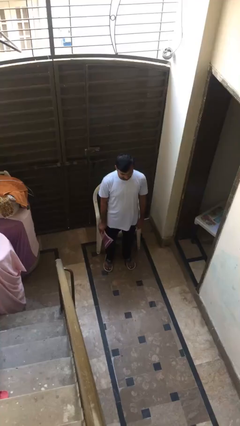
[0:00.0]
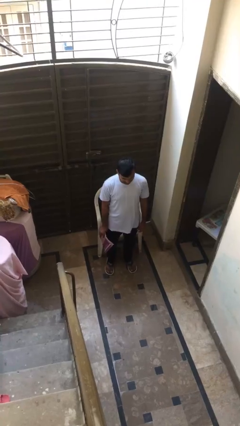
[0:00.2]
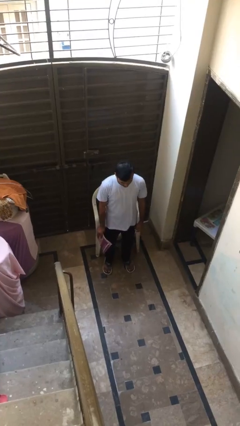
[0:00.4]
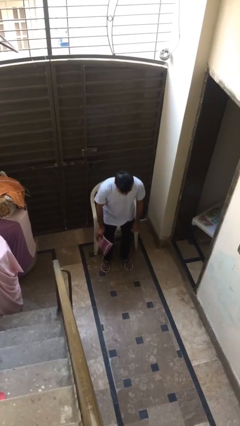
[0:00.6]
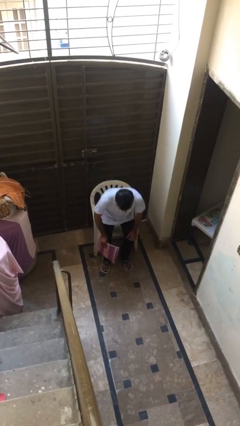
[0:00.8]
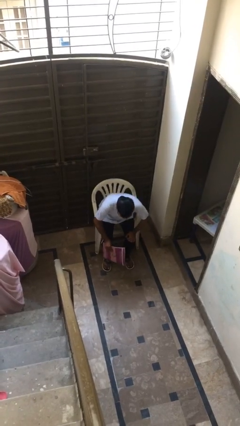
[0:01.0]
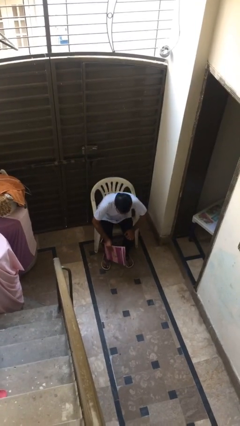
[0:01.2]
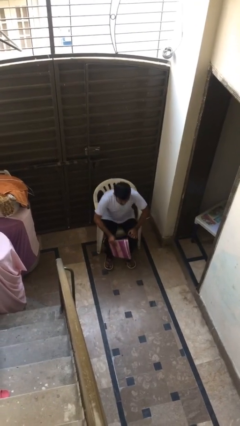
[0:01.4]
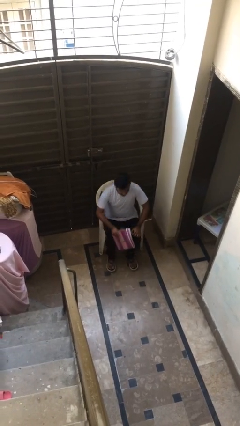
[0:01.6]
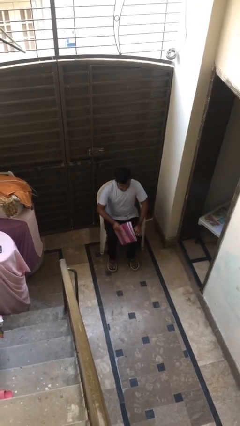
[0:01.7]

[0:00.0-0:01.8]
person sits down

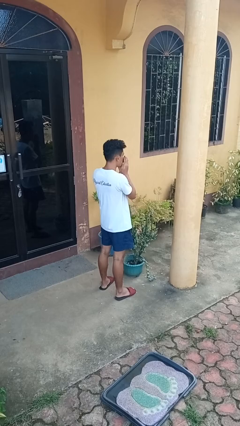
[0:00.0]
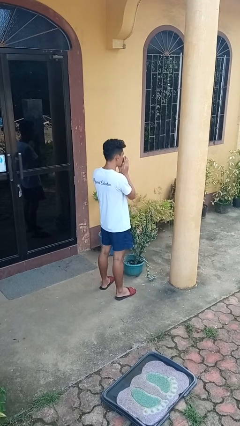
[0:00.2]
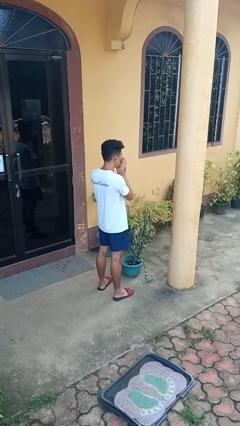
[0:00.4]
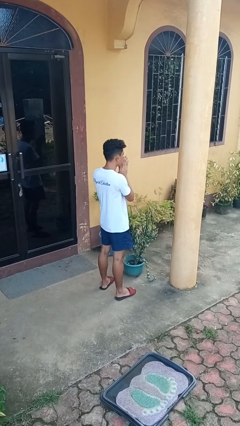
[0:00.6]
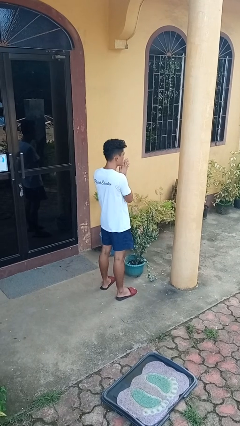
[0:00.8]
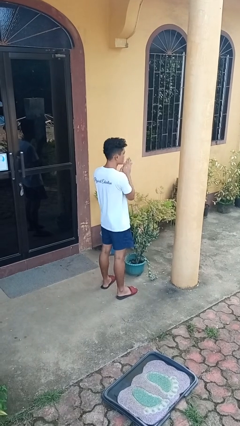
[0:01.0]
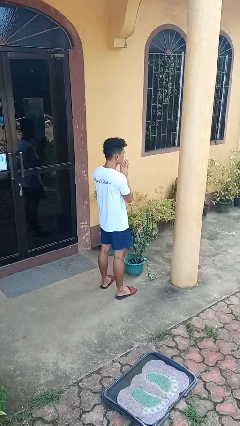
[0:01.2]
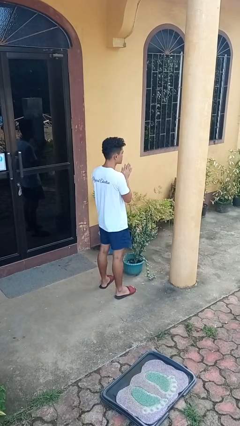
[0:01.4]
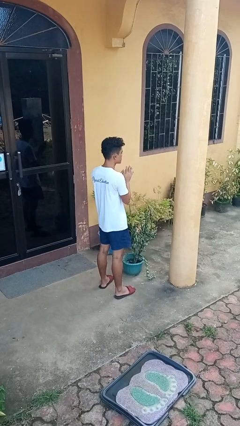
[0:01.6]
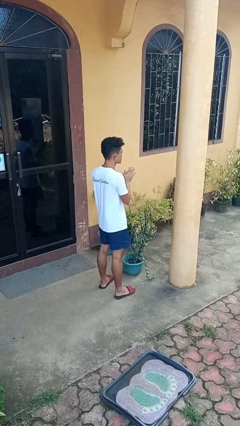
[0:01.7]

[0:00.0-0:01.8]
person blows into hands

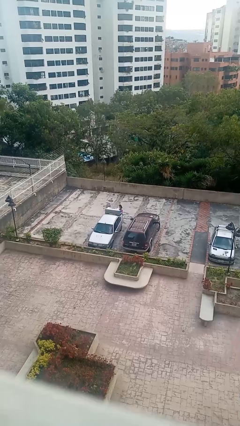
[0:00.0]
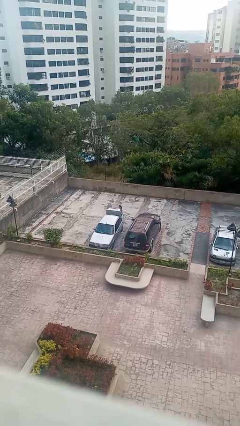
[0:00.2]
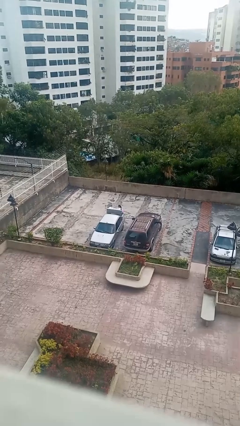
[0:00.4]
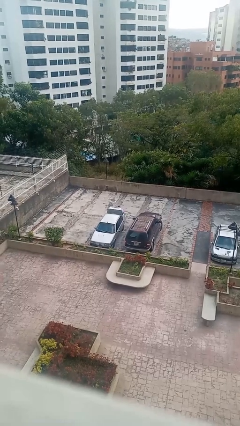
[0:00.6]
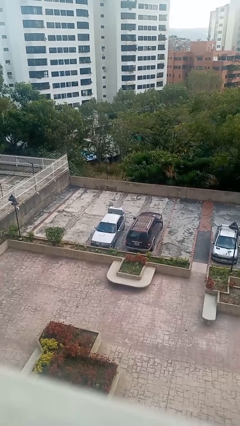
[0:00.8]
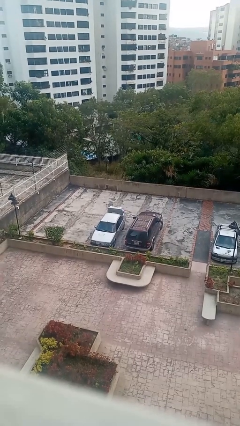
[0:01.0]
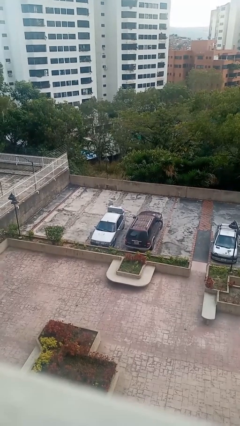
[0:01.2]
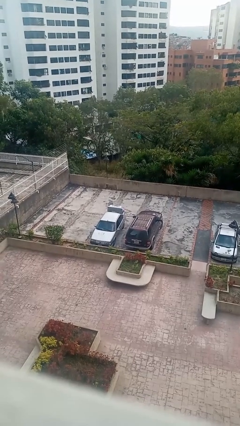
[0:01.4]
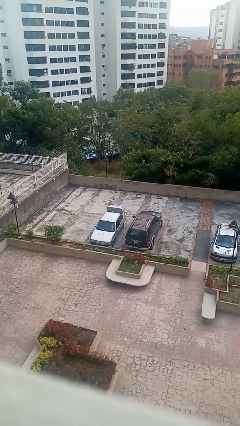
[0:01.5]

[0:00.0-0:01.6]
person loads car

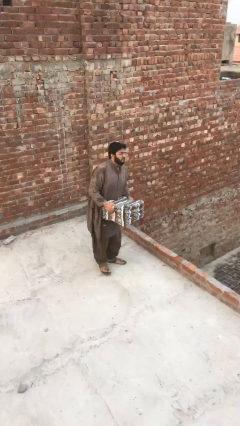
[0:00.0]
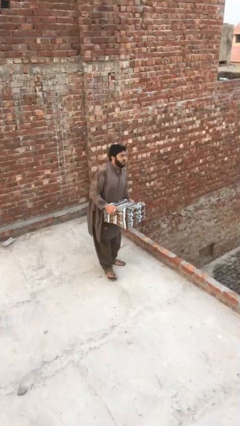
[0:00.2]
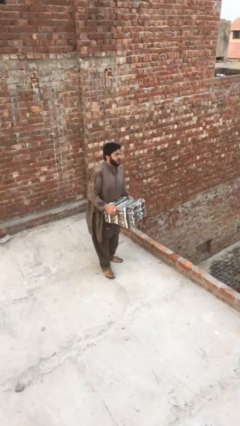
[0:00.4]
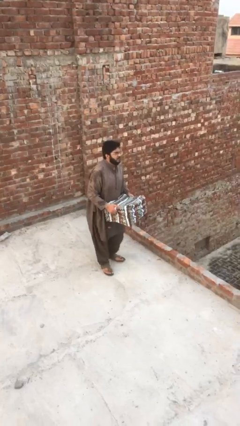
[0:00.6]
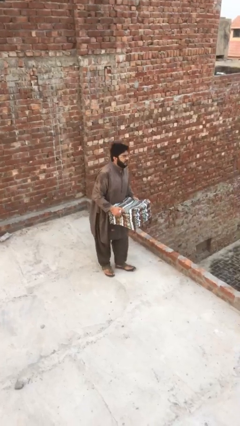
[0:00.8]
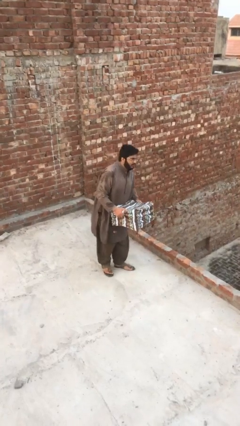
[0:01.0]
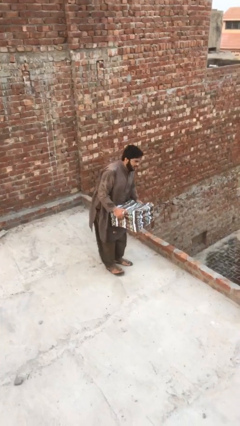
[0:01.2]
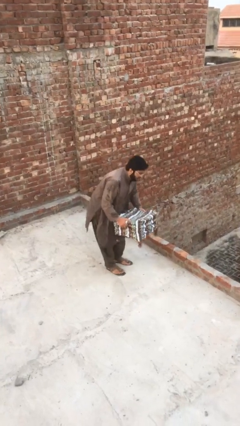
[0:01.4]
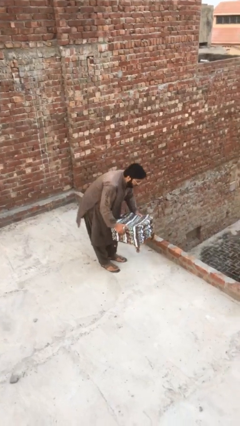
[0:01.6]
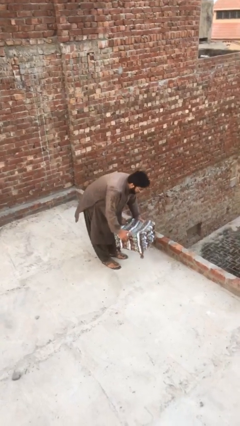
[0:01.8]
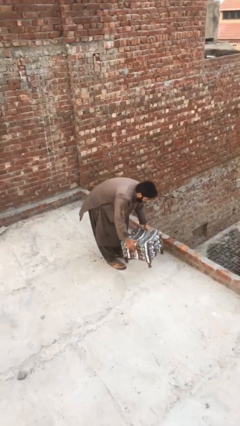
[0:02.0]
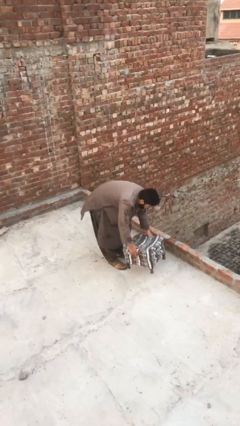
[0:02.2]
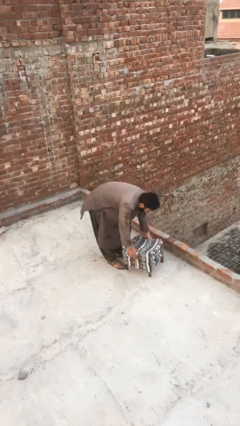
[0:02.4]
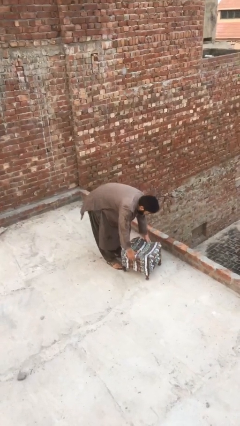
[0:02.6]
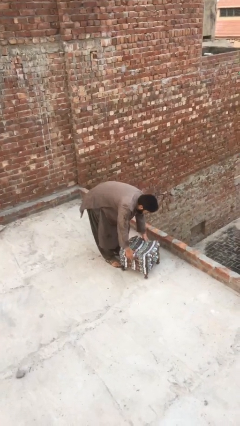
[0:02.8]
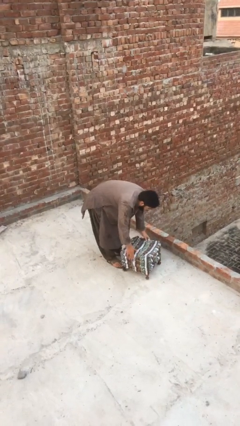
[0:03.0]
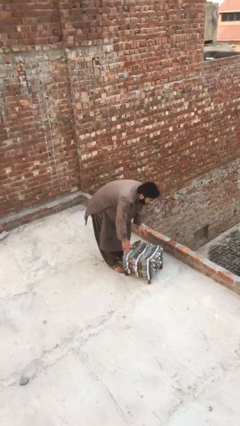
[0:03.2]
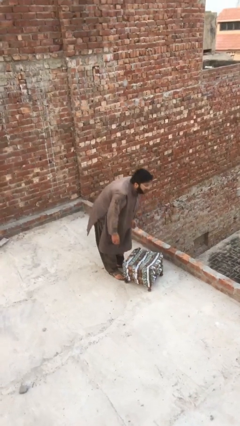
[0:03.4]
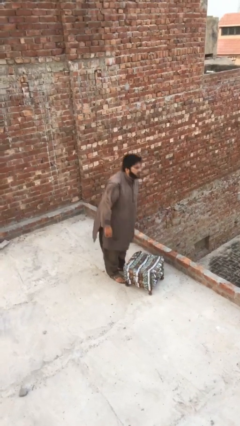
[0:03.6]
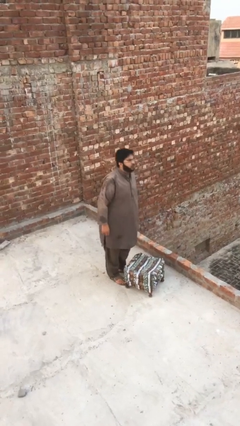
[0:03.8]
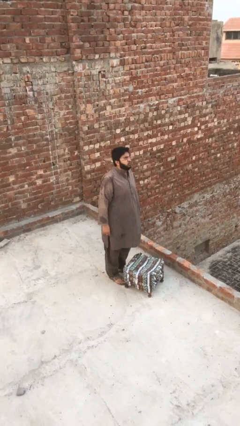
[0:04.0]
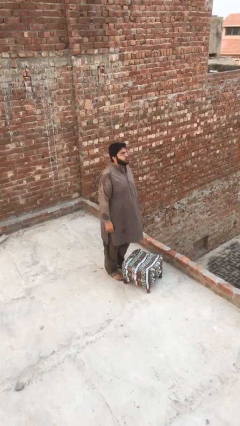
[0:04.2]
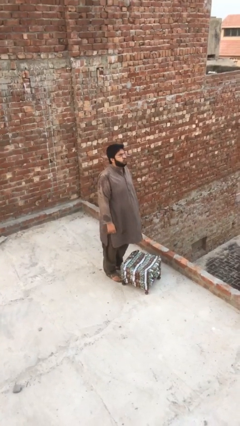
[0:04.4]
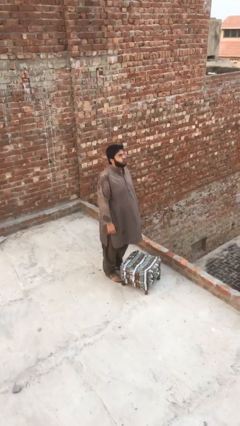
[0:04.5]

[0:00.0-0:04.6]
person puts down object on floor

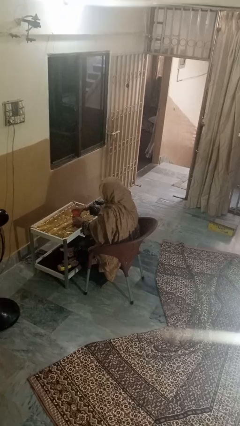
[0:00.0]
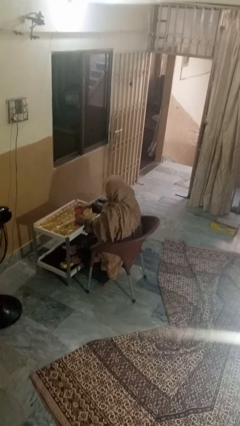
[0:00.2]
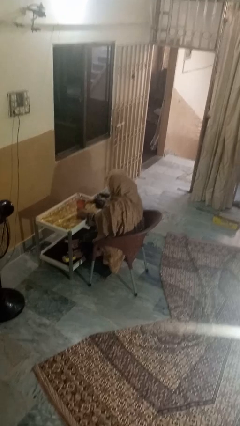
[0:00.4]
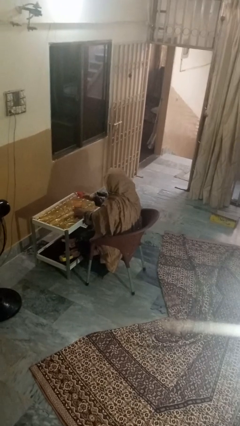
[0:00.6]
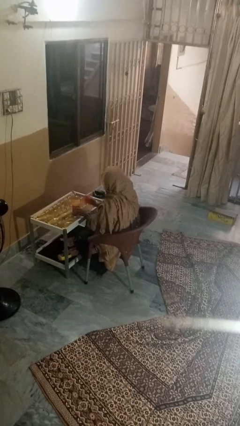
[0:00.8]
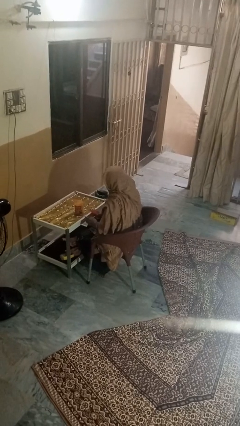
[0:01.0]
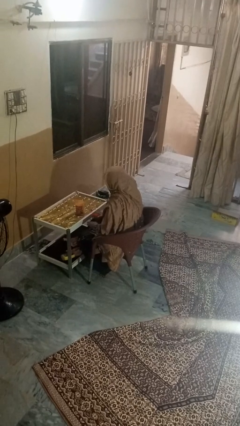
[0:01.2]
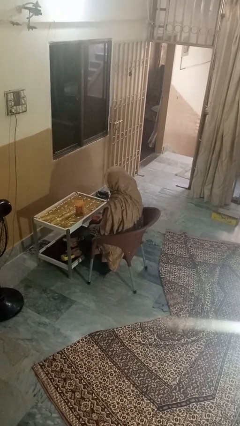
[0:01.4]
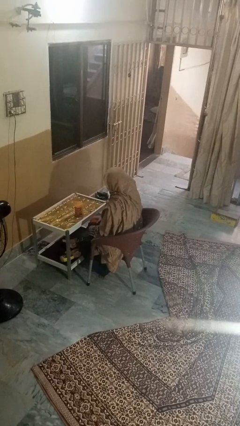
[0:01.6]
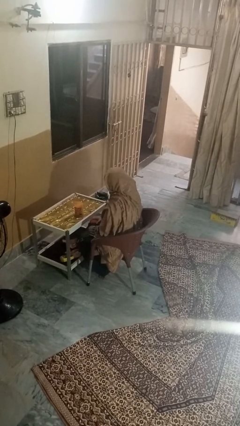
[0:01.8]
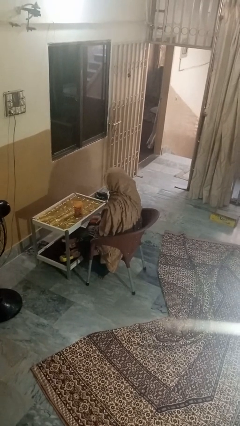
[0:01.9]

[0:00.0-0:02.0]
person opens jar

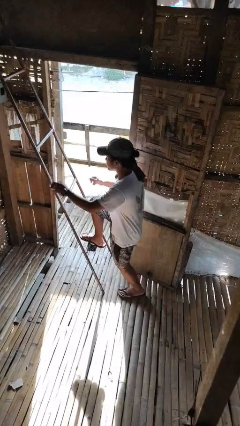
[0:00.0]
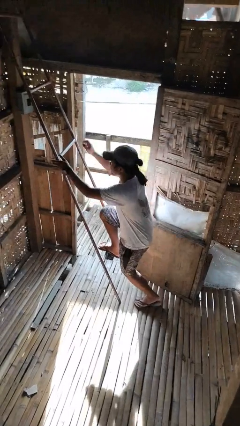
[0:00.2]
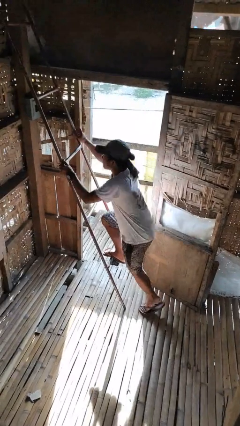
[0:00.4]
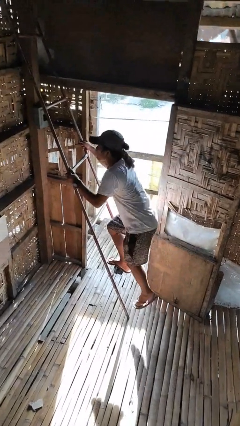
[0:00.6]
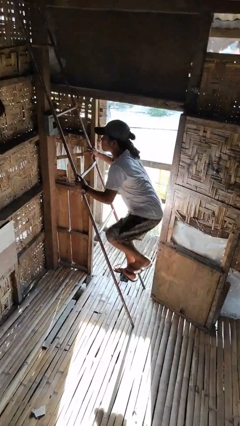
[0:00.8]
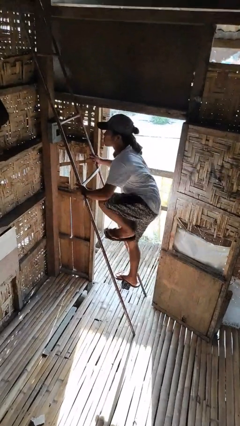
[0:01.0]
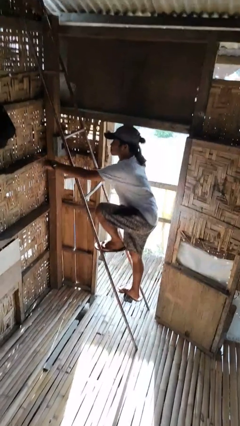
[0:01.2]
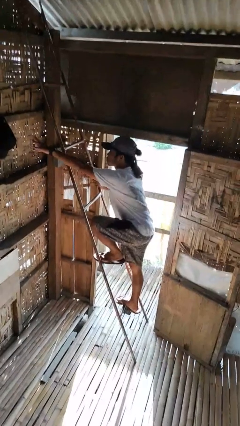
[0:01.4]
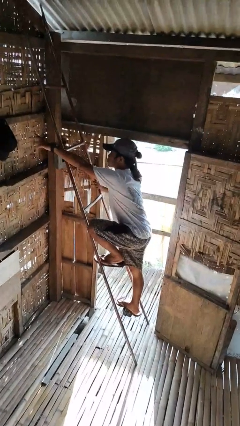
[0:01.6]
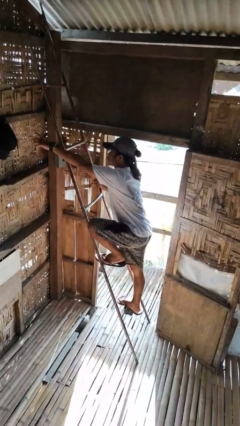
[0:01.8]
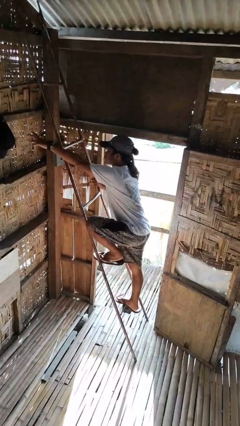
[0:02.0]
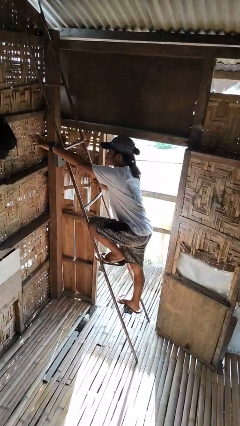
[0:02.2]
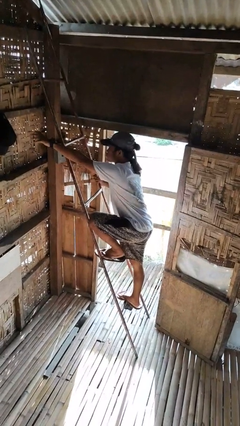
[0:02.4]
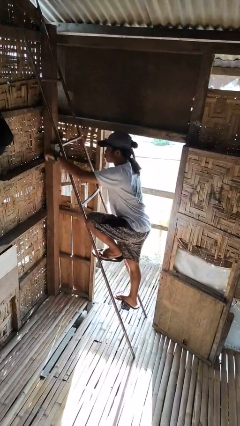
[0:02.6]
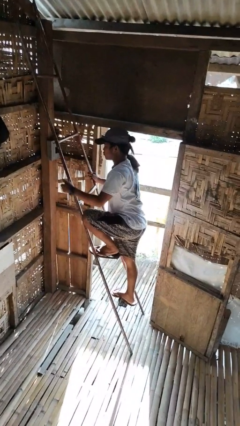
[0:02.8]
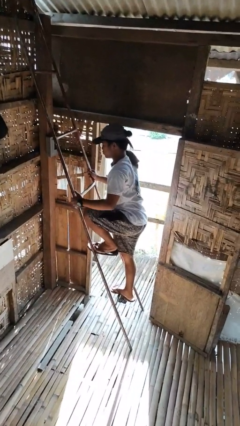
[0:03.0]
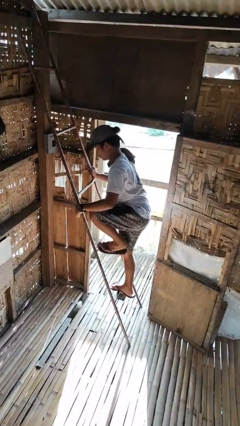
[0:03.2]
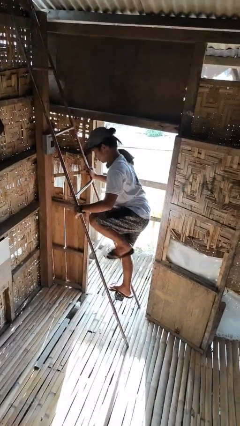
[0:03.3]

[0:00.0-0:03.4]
person climbs up ladder

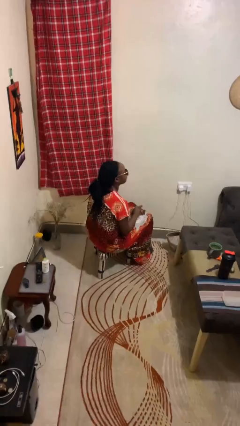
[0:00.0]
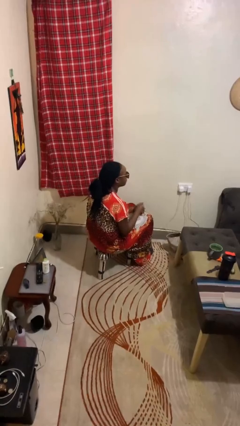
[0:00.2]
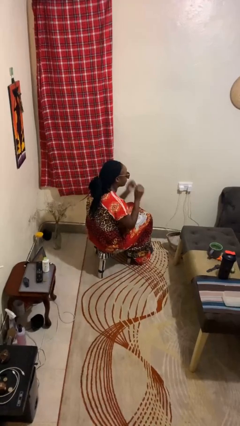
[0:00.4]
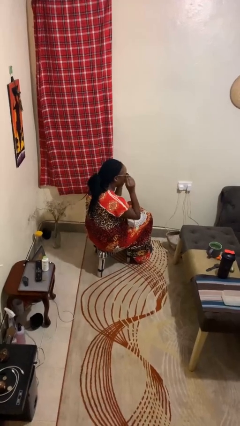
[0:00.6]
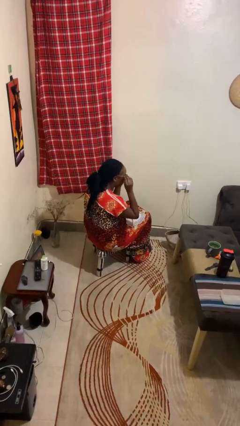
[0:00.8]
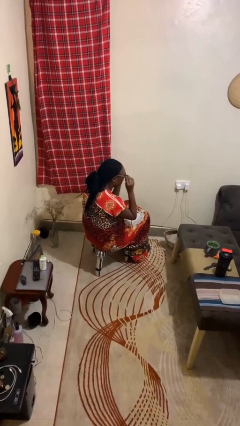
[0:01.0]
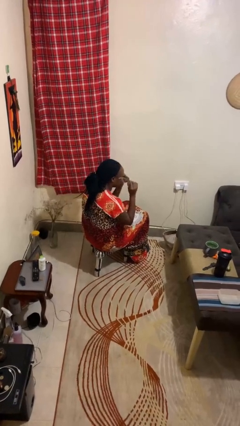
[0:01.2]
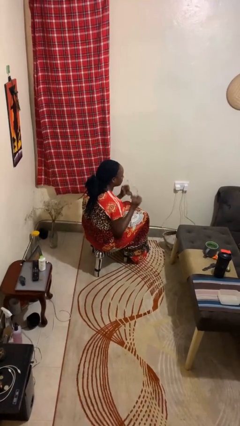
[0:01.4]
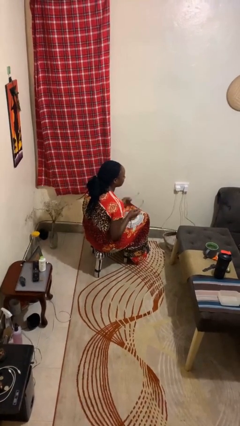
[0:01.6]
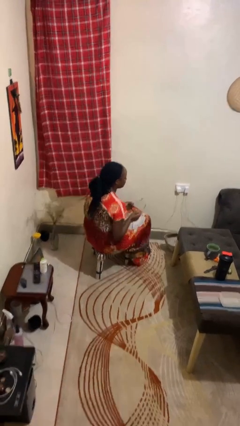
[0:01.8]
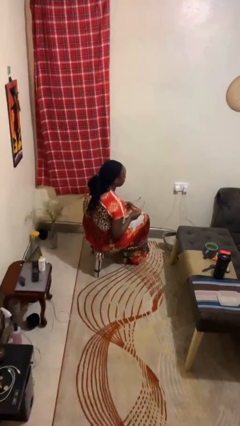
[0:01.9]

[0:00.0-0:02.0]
person takes off sunglasses
